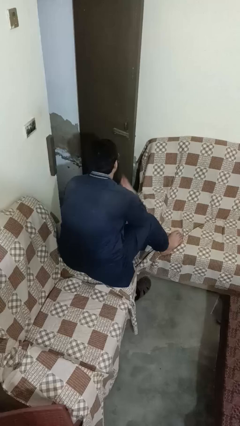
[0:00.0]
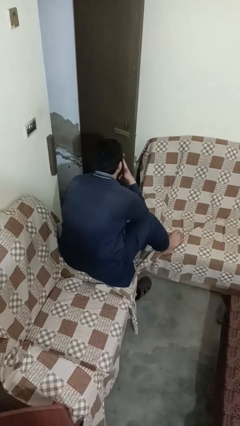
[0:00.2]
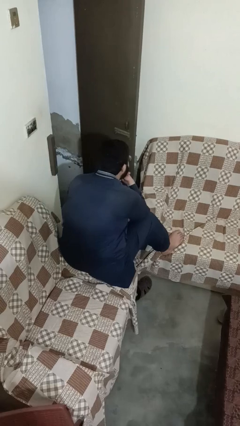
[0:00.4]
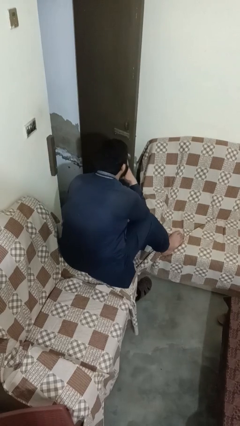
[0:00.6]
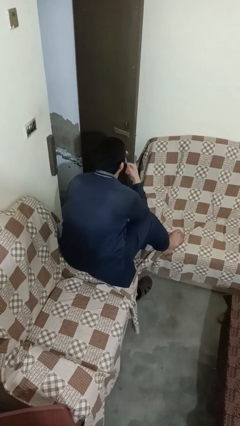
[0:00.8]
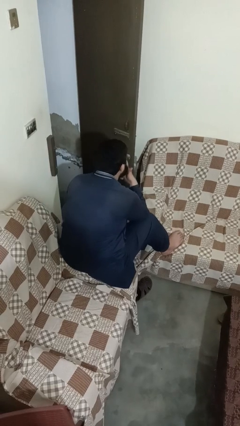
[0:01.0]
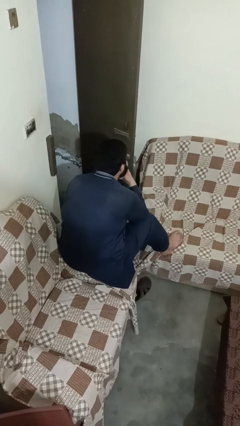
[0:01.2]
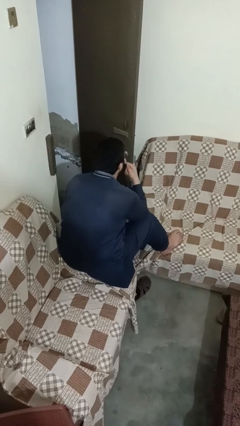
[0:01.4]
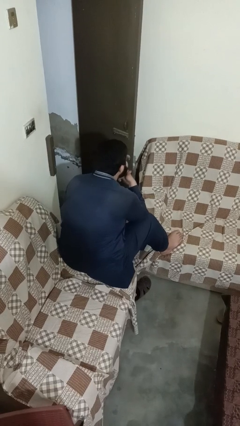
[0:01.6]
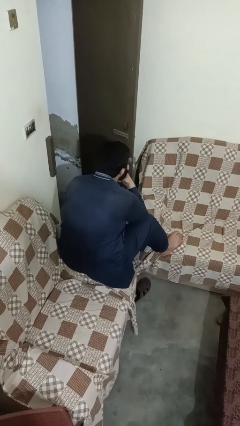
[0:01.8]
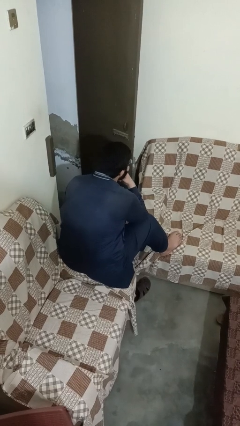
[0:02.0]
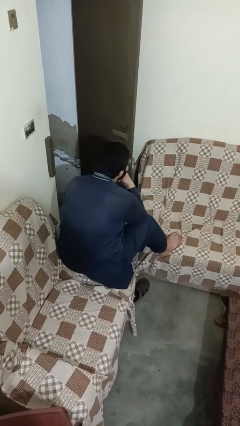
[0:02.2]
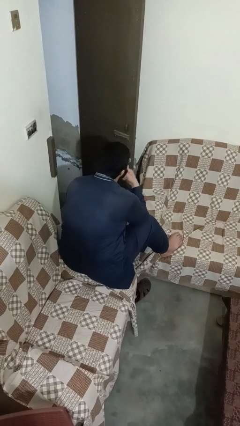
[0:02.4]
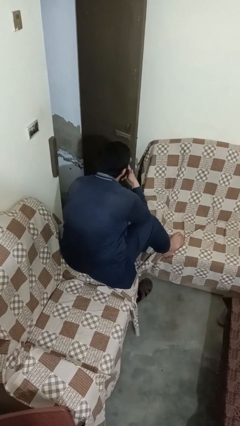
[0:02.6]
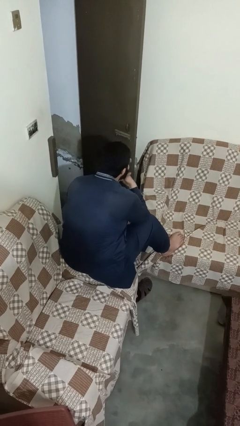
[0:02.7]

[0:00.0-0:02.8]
person strokes chin

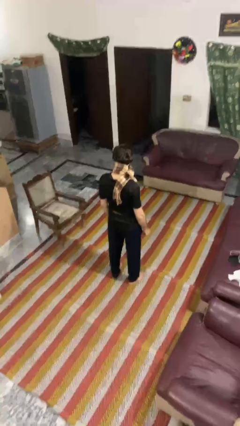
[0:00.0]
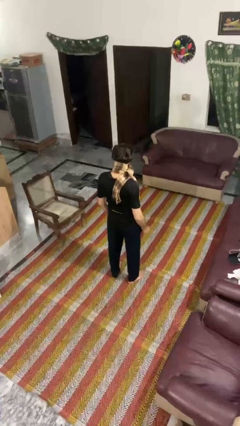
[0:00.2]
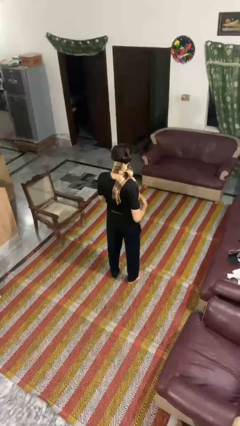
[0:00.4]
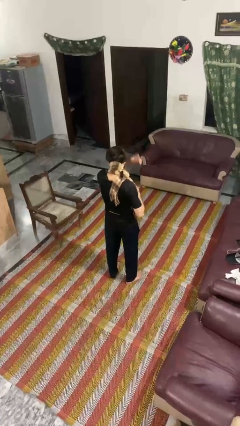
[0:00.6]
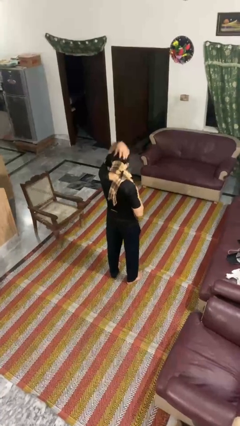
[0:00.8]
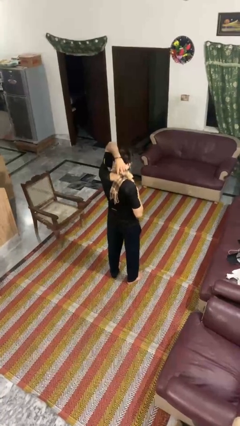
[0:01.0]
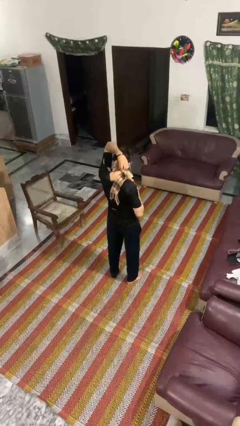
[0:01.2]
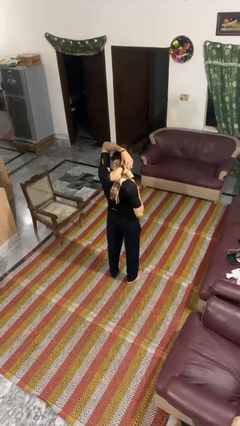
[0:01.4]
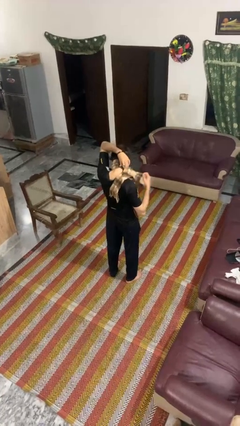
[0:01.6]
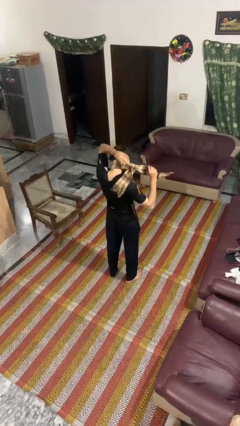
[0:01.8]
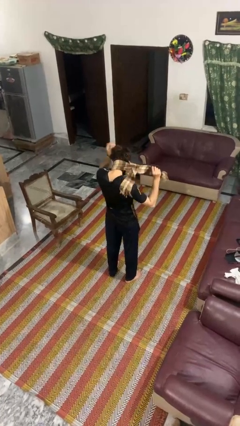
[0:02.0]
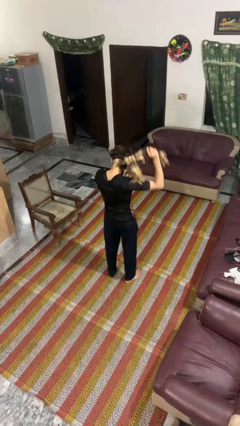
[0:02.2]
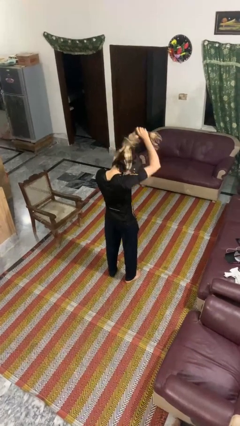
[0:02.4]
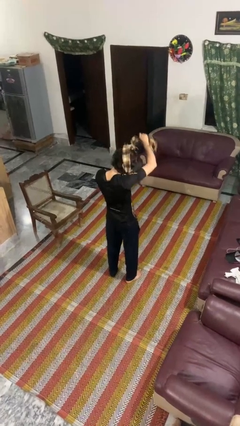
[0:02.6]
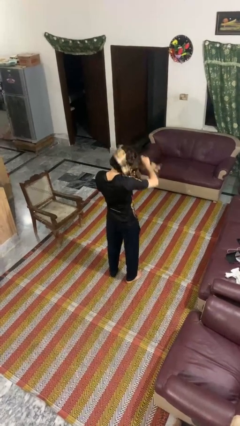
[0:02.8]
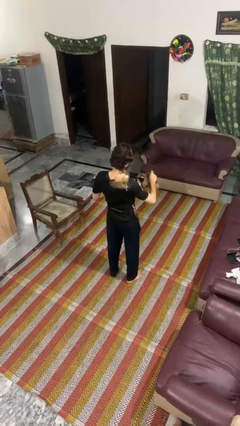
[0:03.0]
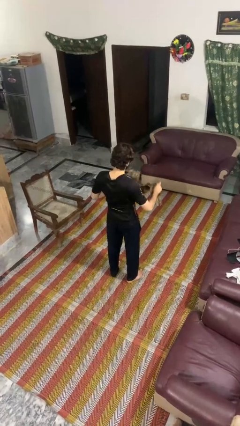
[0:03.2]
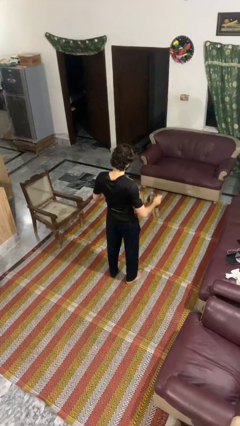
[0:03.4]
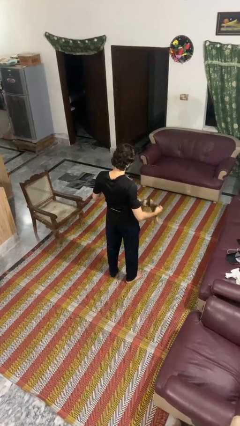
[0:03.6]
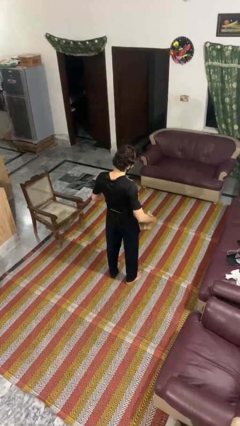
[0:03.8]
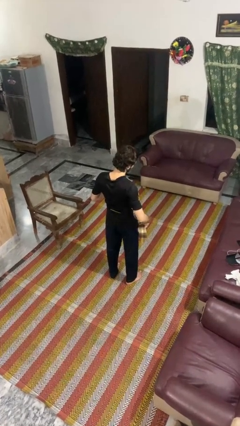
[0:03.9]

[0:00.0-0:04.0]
person takes off scarf

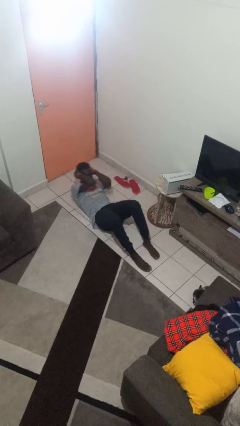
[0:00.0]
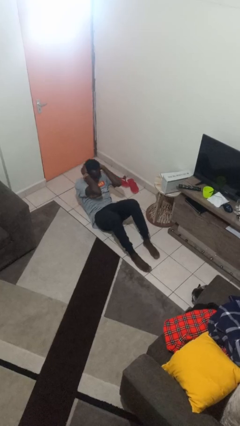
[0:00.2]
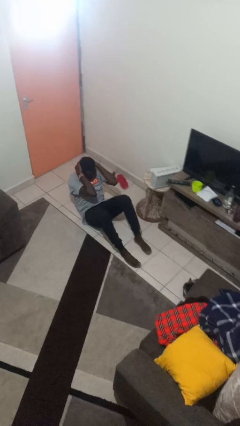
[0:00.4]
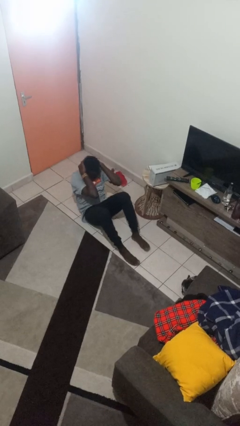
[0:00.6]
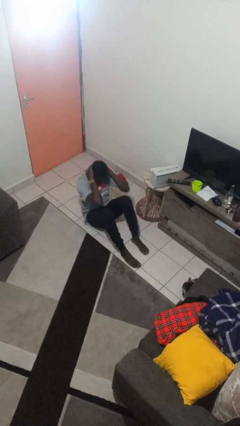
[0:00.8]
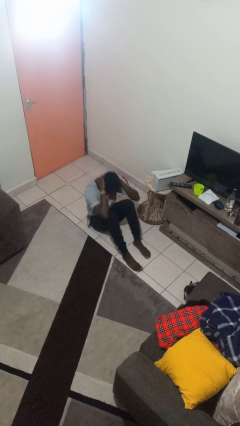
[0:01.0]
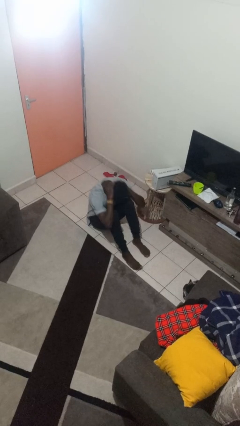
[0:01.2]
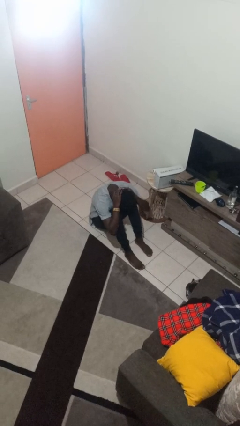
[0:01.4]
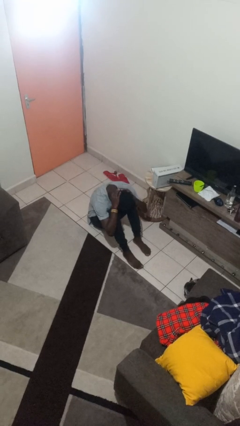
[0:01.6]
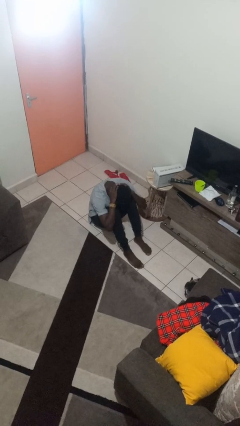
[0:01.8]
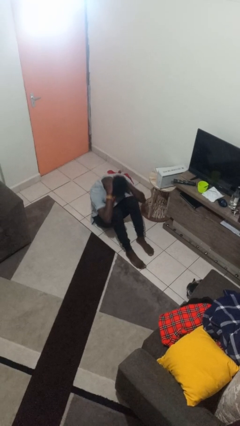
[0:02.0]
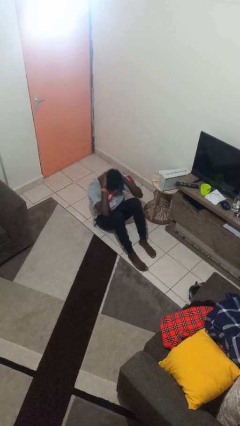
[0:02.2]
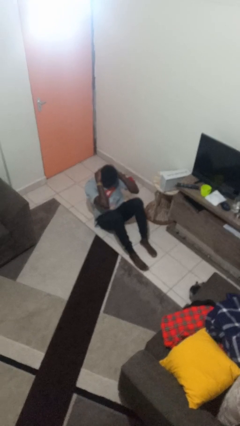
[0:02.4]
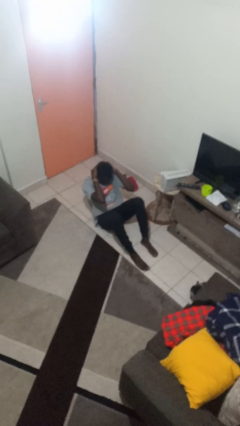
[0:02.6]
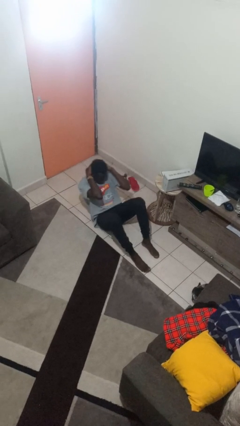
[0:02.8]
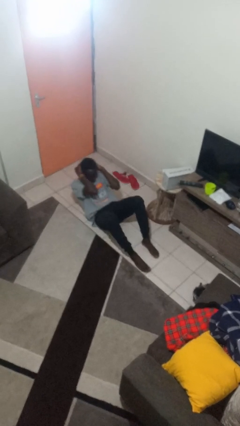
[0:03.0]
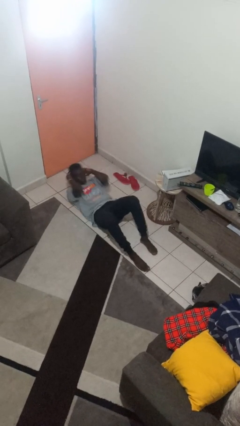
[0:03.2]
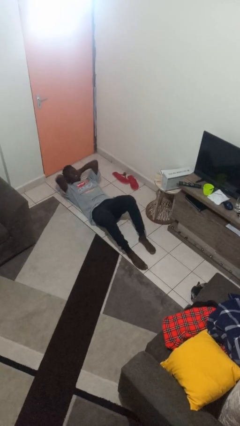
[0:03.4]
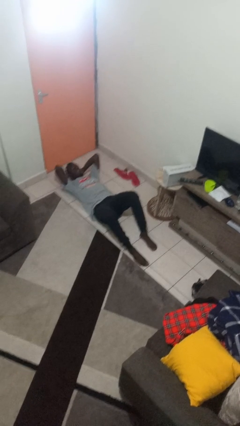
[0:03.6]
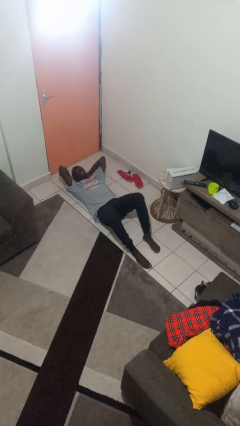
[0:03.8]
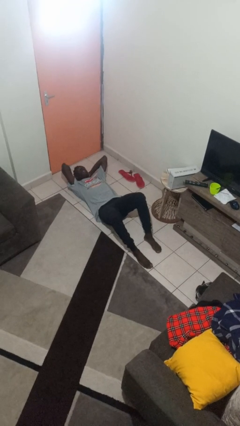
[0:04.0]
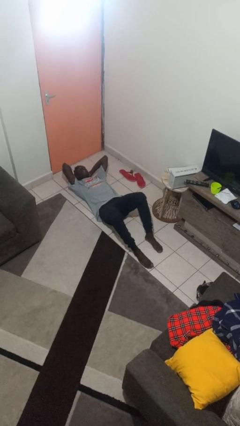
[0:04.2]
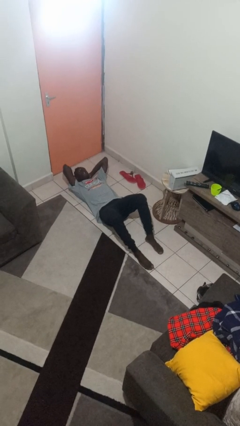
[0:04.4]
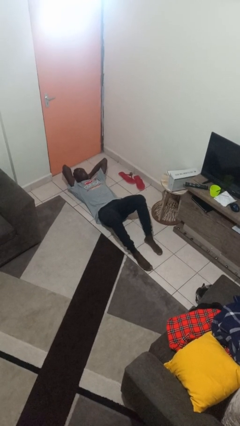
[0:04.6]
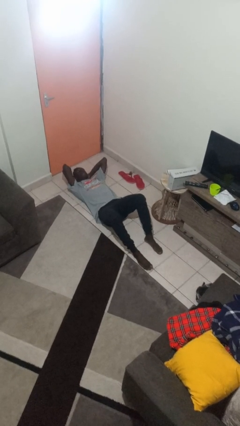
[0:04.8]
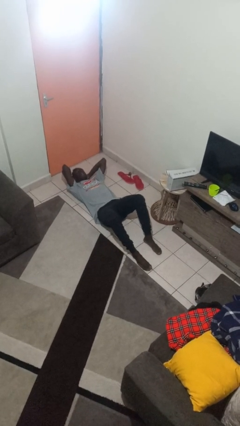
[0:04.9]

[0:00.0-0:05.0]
person exercises with situp

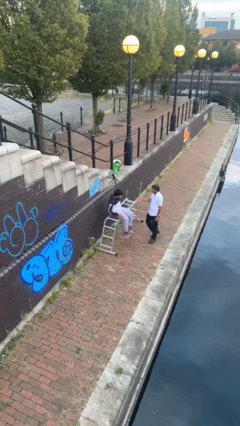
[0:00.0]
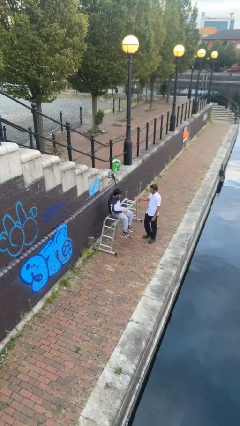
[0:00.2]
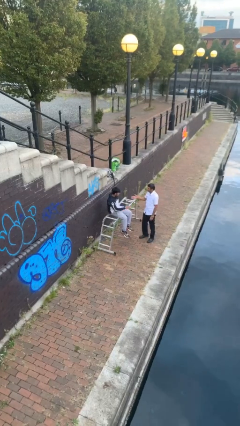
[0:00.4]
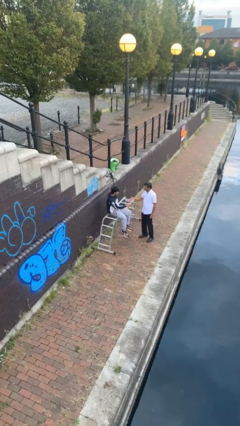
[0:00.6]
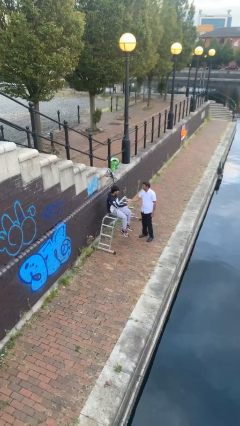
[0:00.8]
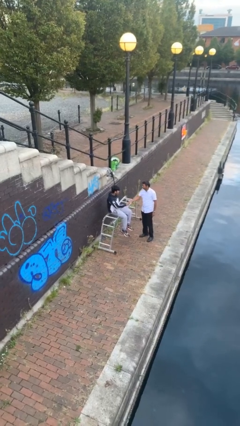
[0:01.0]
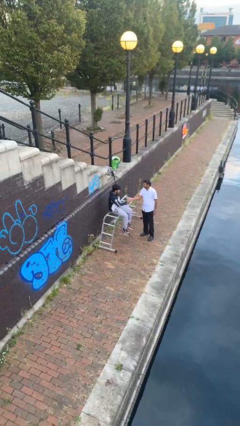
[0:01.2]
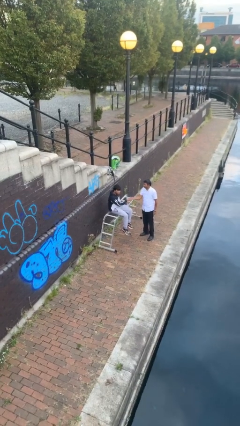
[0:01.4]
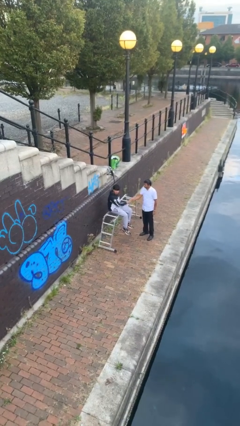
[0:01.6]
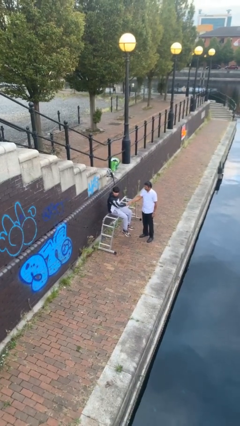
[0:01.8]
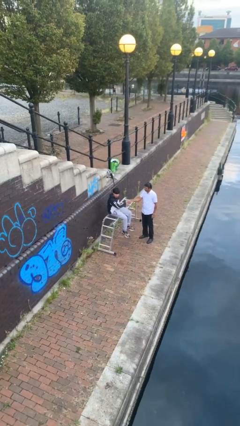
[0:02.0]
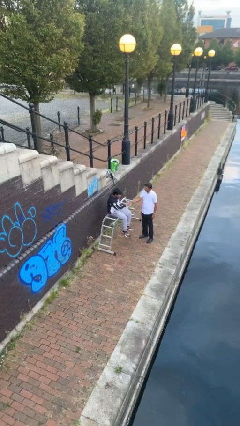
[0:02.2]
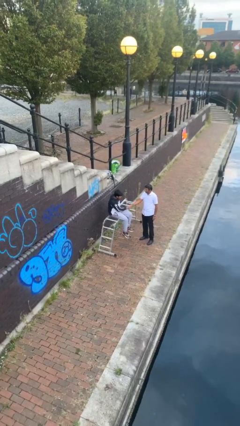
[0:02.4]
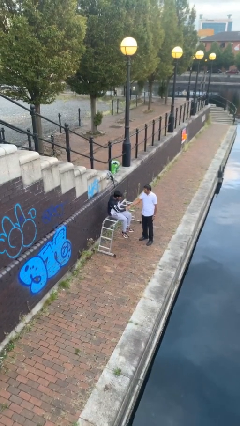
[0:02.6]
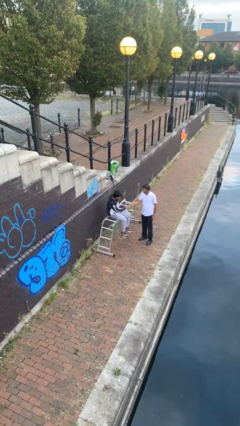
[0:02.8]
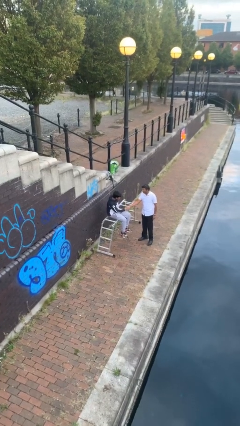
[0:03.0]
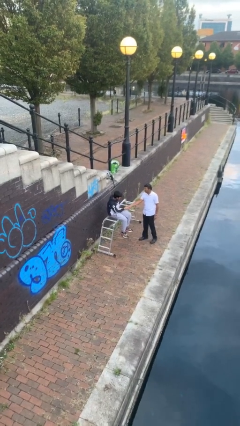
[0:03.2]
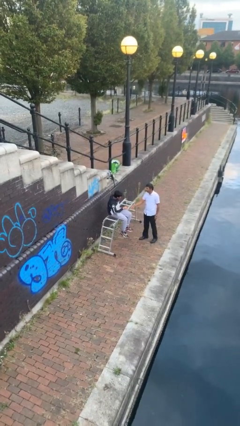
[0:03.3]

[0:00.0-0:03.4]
person shakes hand

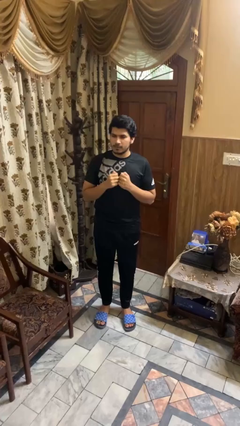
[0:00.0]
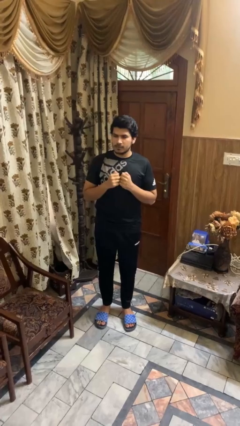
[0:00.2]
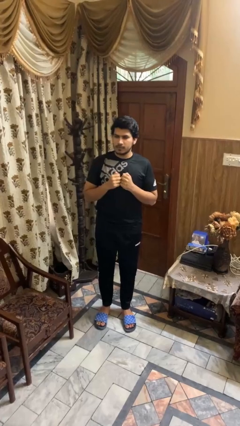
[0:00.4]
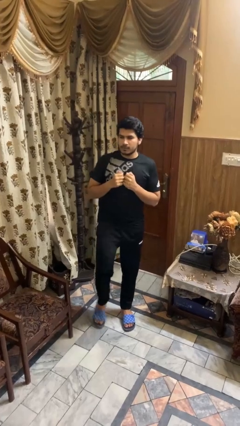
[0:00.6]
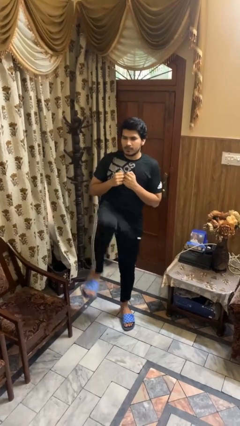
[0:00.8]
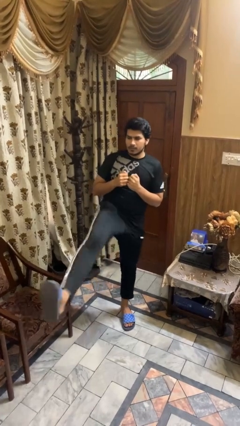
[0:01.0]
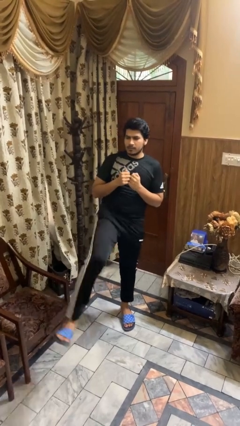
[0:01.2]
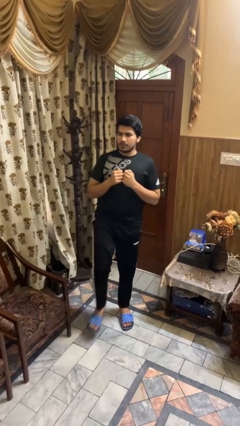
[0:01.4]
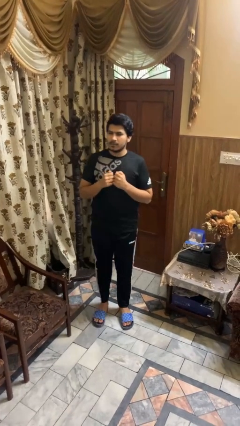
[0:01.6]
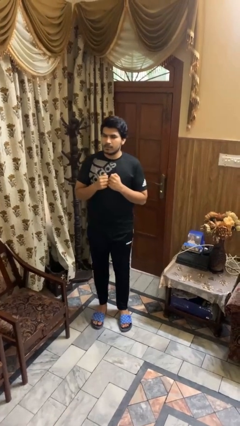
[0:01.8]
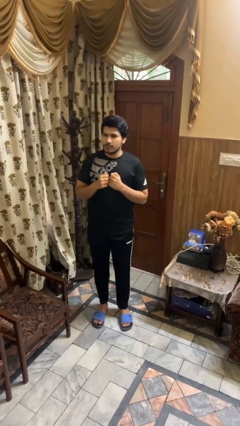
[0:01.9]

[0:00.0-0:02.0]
person karate kicks
